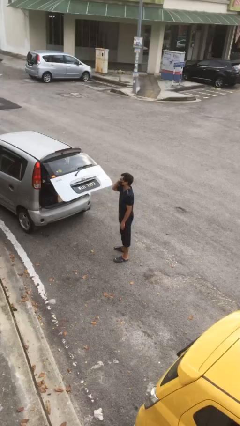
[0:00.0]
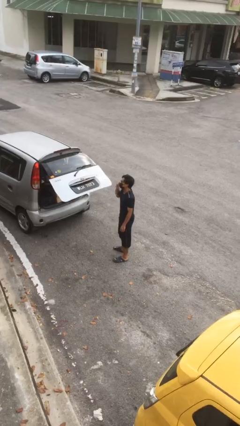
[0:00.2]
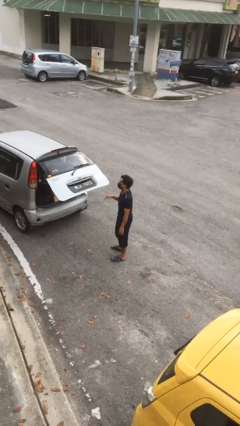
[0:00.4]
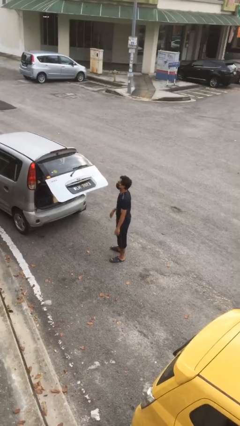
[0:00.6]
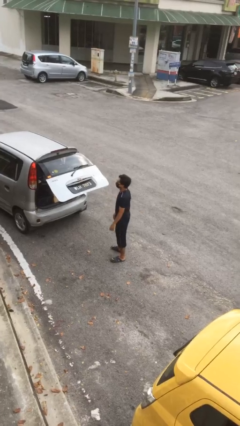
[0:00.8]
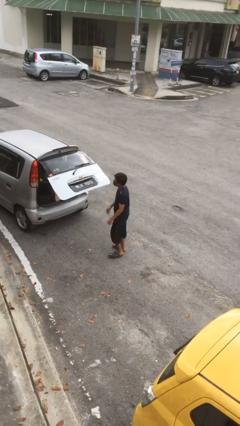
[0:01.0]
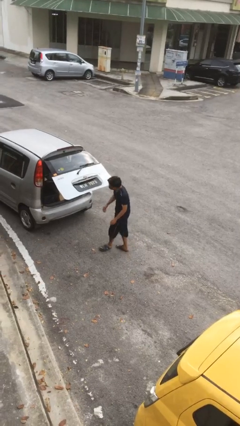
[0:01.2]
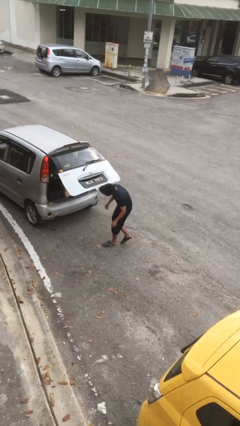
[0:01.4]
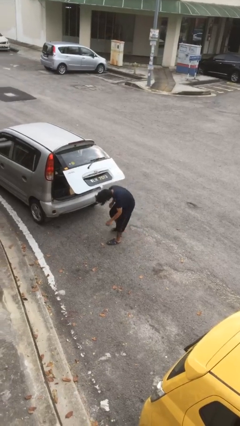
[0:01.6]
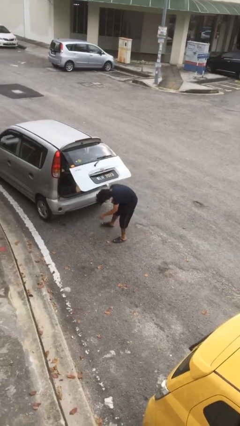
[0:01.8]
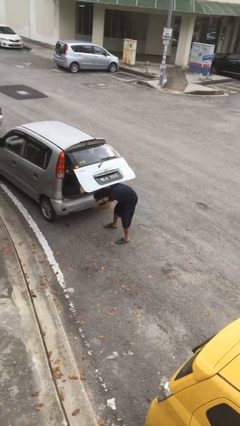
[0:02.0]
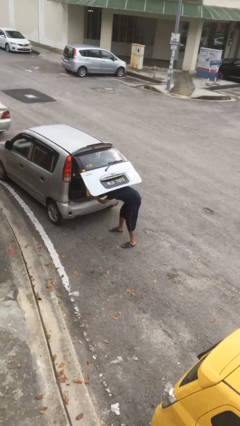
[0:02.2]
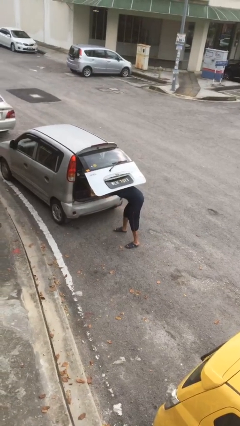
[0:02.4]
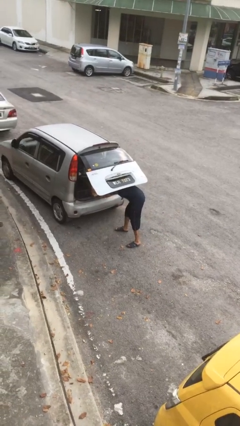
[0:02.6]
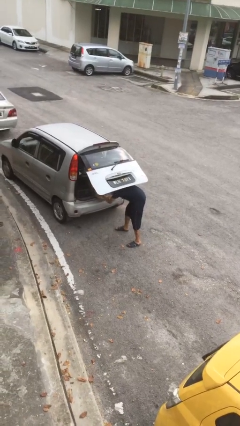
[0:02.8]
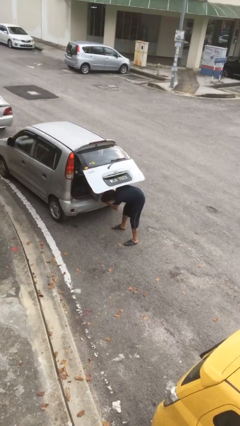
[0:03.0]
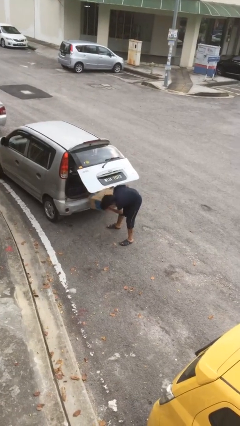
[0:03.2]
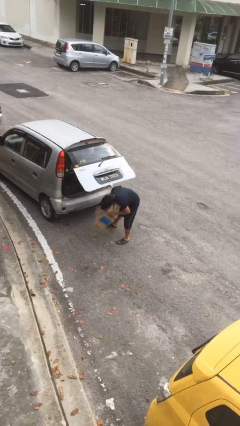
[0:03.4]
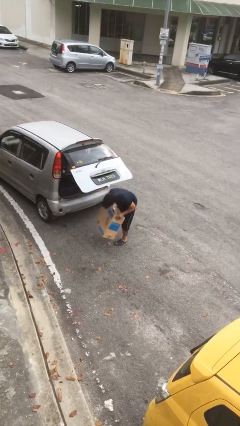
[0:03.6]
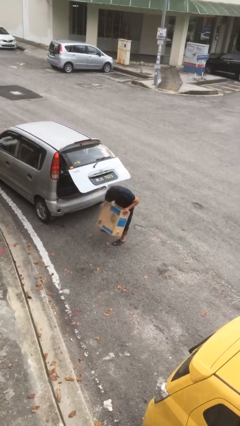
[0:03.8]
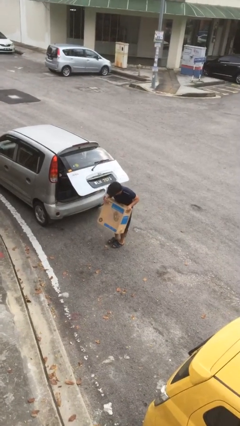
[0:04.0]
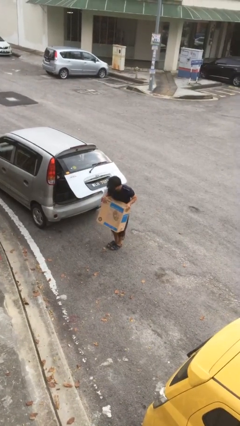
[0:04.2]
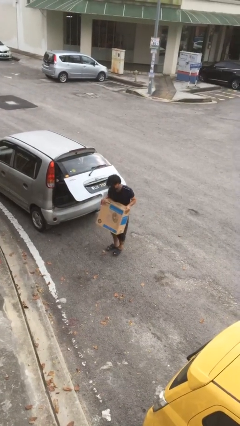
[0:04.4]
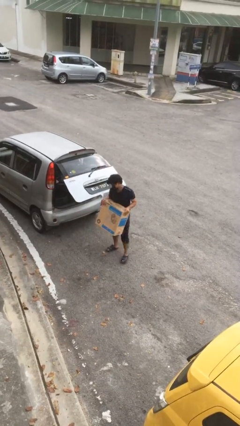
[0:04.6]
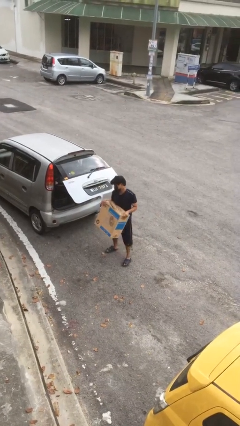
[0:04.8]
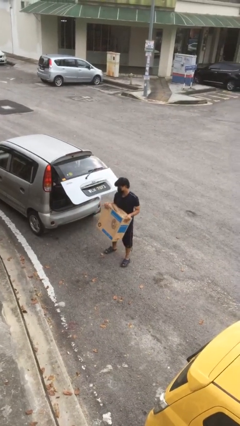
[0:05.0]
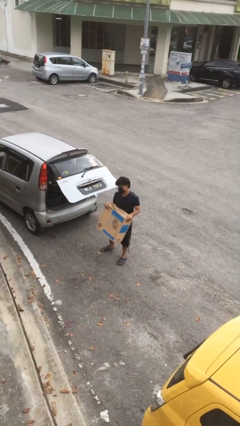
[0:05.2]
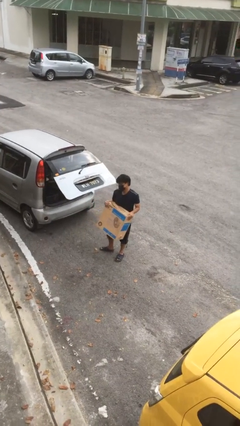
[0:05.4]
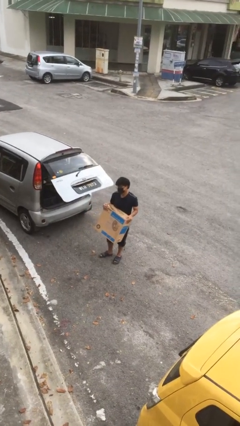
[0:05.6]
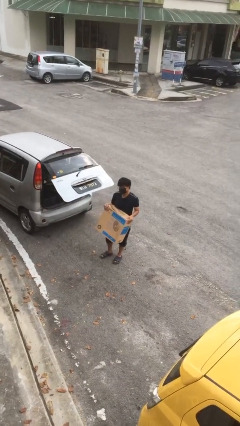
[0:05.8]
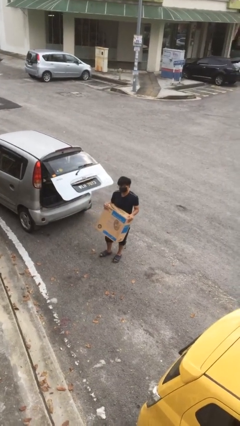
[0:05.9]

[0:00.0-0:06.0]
person unloads car

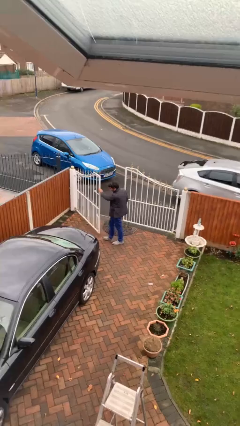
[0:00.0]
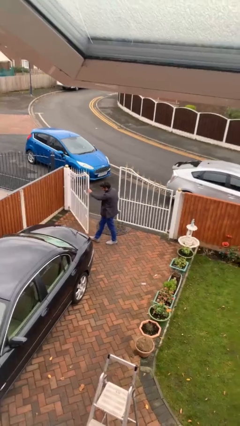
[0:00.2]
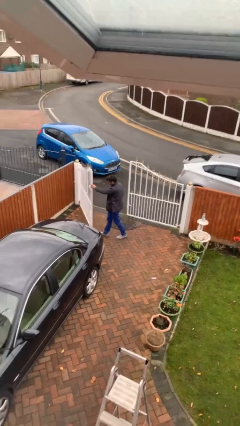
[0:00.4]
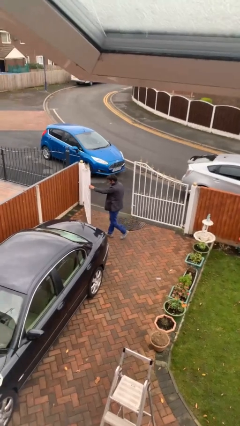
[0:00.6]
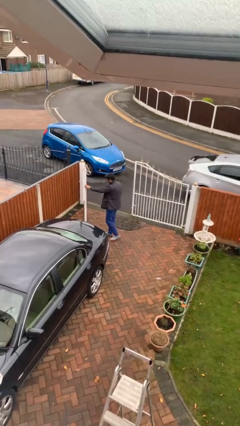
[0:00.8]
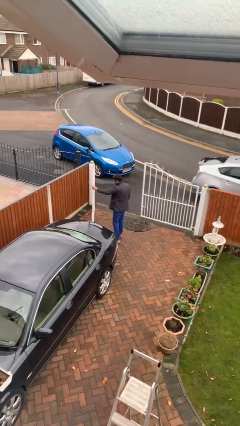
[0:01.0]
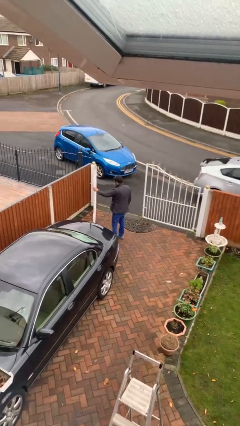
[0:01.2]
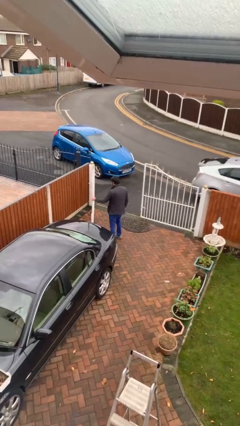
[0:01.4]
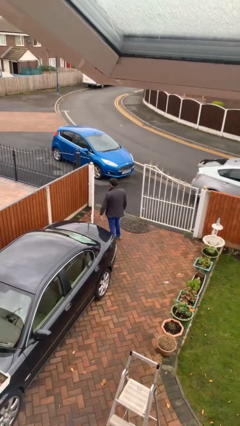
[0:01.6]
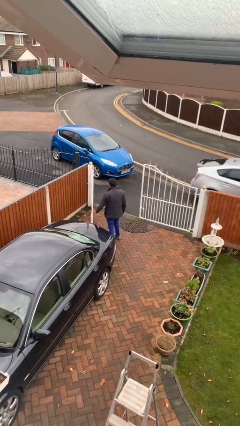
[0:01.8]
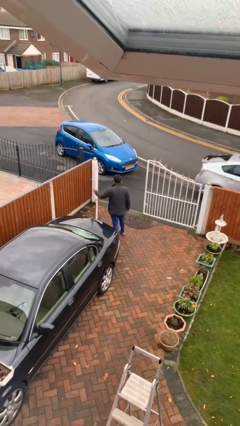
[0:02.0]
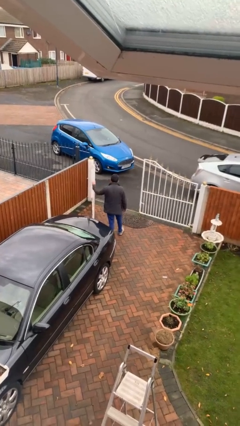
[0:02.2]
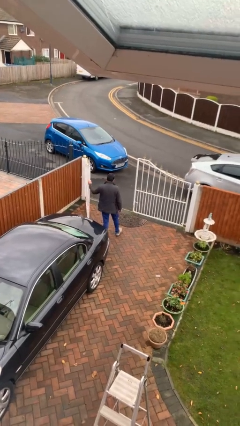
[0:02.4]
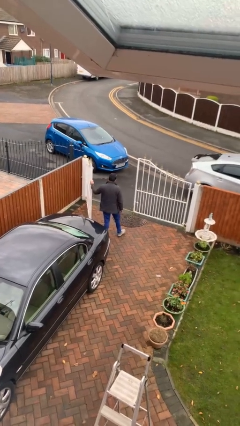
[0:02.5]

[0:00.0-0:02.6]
person opens facility door

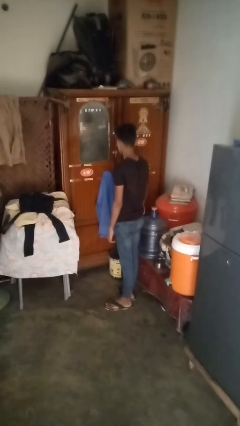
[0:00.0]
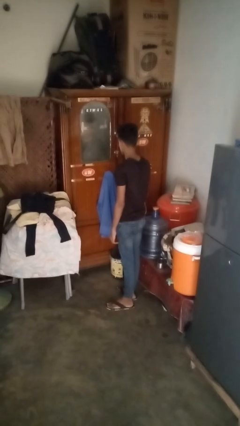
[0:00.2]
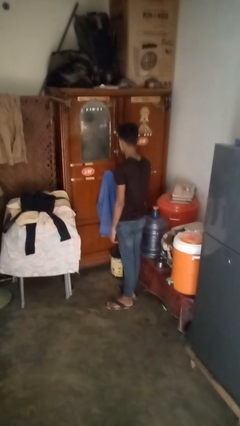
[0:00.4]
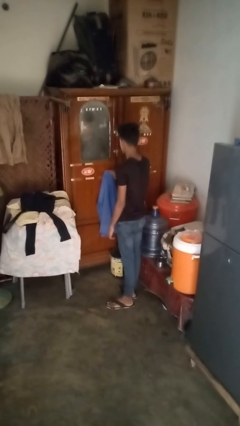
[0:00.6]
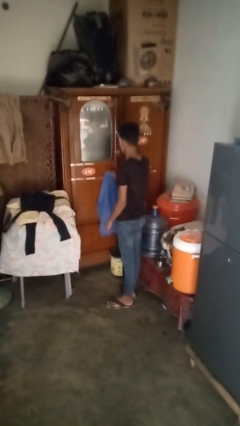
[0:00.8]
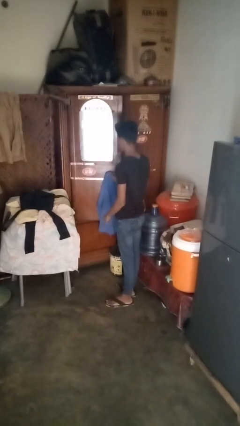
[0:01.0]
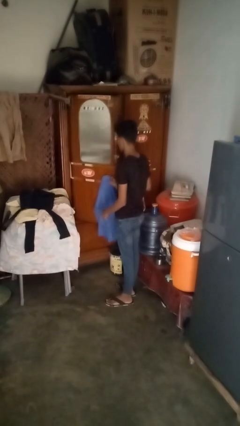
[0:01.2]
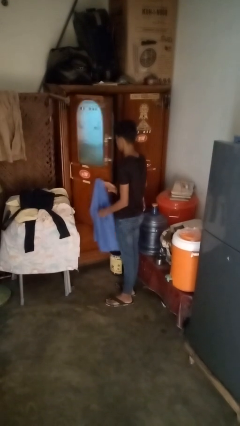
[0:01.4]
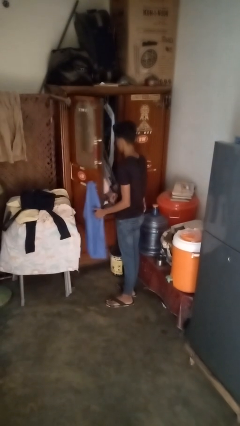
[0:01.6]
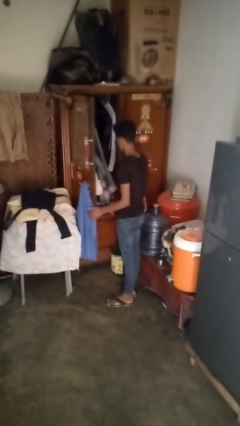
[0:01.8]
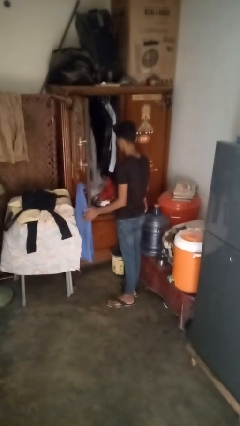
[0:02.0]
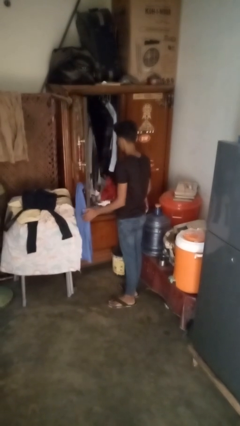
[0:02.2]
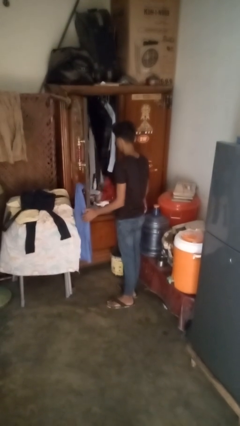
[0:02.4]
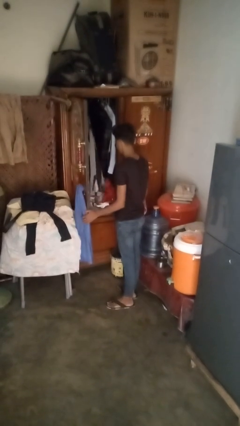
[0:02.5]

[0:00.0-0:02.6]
person opens dresser drawer

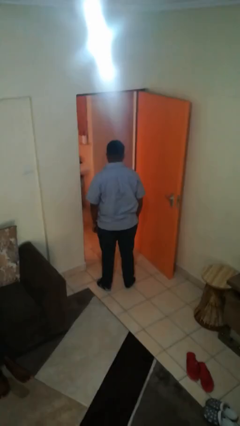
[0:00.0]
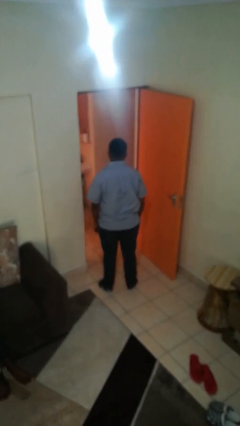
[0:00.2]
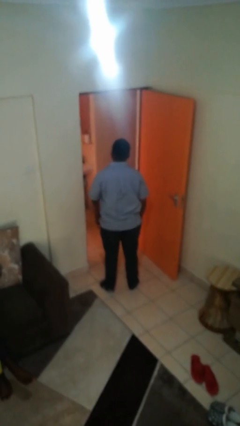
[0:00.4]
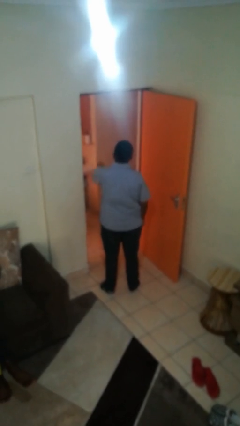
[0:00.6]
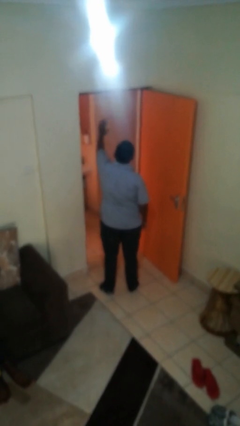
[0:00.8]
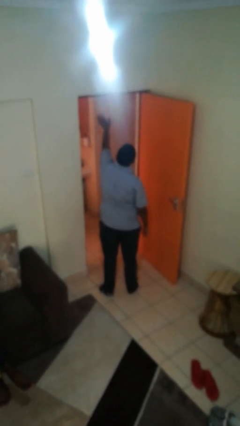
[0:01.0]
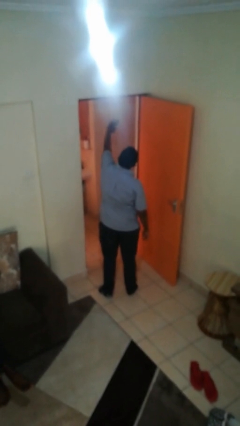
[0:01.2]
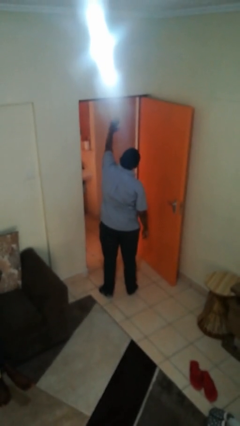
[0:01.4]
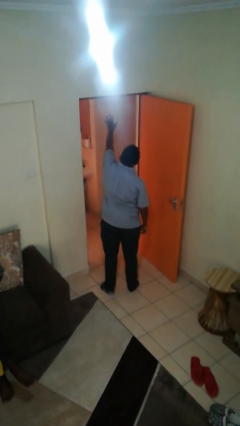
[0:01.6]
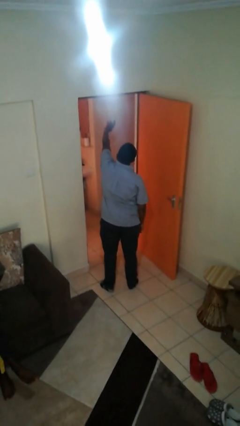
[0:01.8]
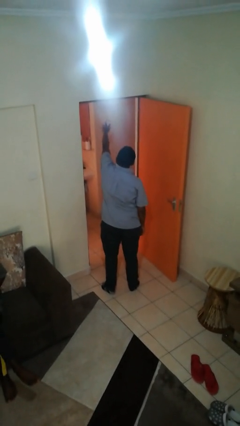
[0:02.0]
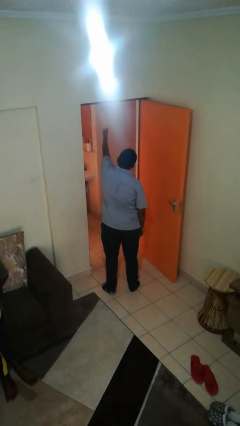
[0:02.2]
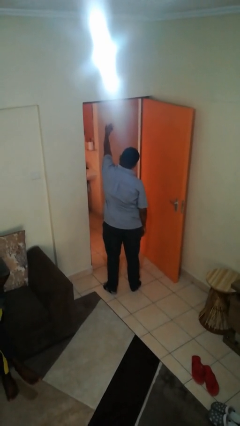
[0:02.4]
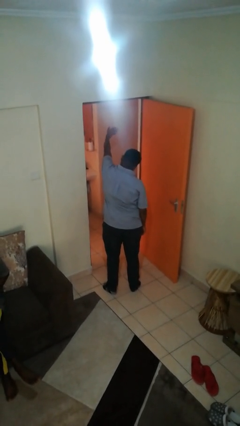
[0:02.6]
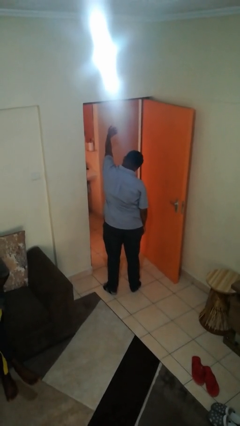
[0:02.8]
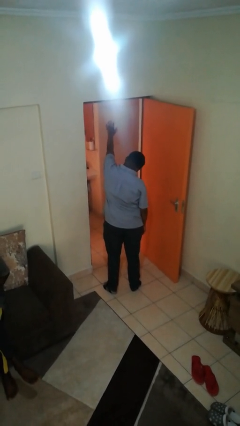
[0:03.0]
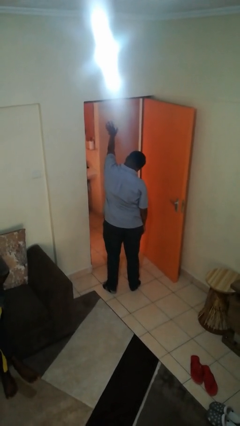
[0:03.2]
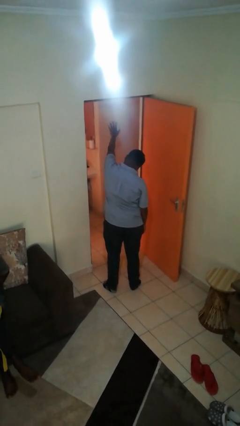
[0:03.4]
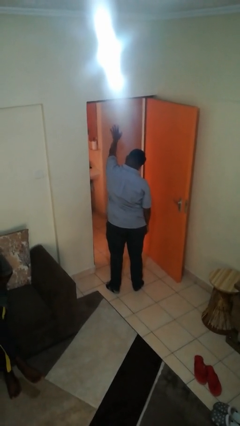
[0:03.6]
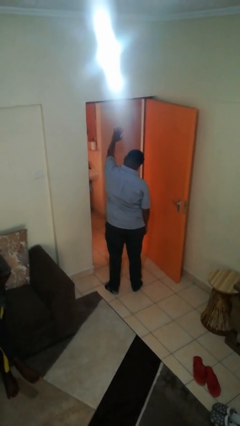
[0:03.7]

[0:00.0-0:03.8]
person waves at person

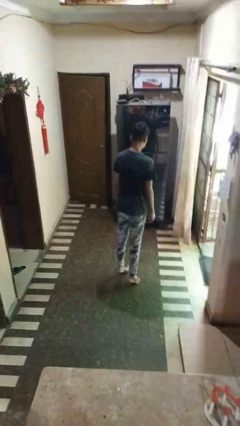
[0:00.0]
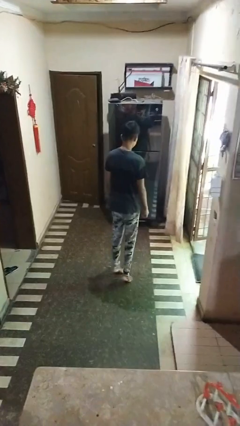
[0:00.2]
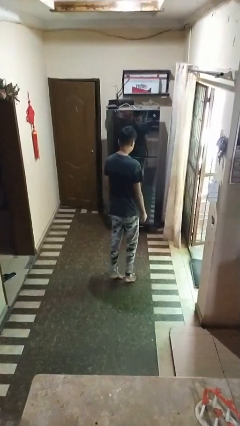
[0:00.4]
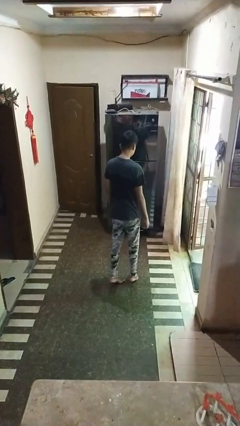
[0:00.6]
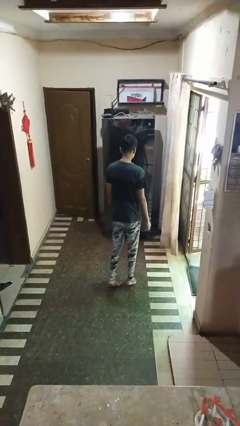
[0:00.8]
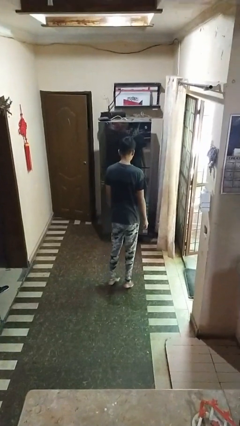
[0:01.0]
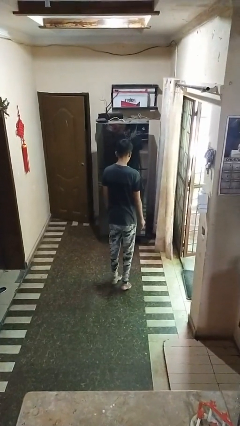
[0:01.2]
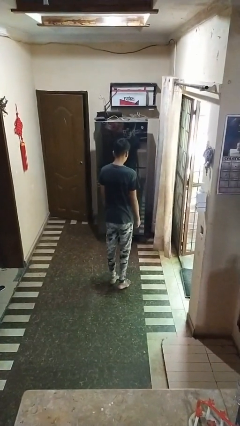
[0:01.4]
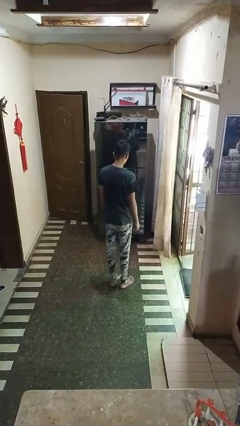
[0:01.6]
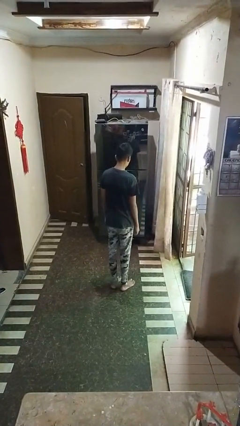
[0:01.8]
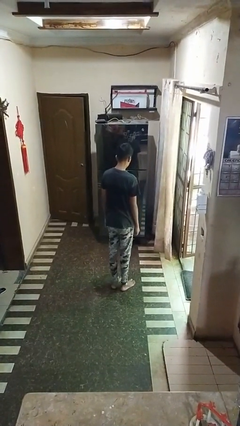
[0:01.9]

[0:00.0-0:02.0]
person walks tiptoe

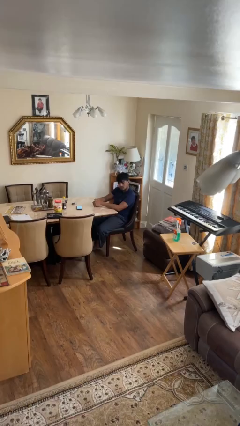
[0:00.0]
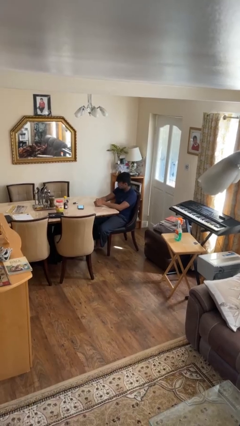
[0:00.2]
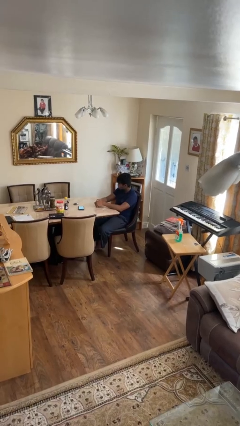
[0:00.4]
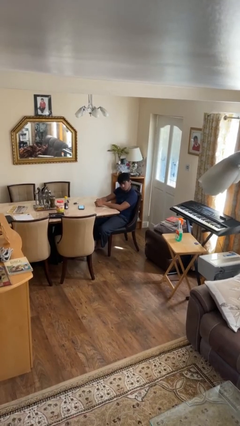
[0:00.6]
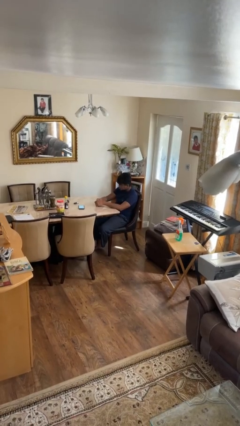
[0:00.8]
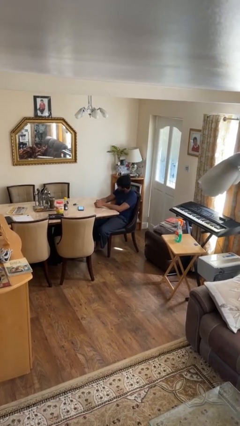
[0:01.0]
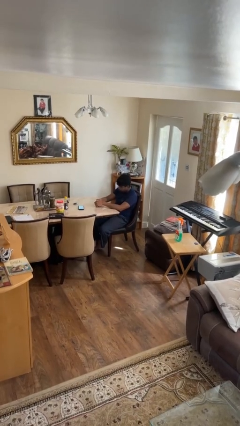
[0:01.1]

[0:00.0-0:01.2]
person shakes head
